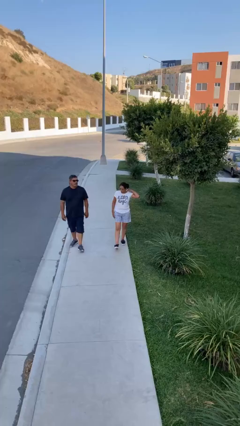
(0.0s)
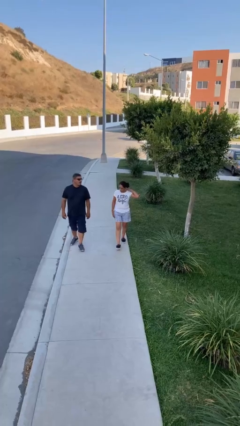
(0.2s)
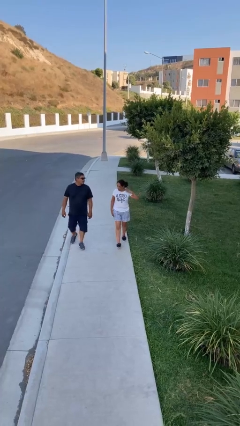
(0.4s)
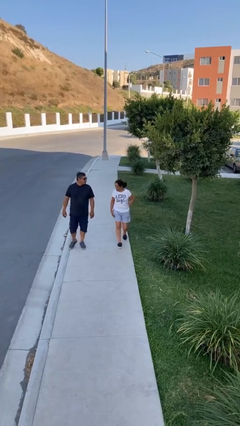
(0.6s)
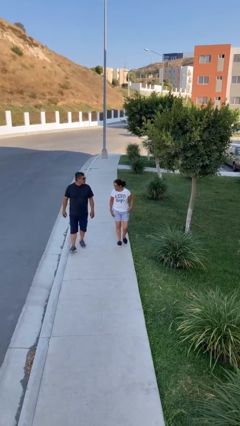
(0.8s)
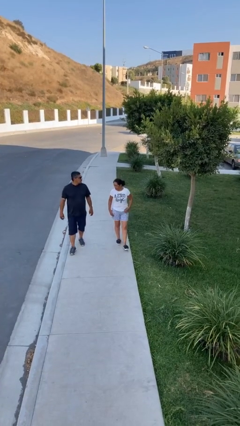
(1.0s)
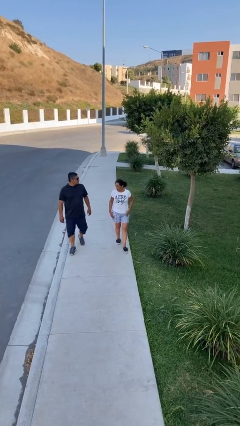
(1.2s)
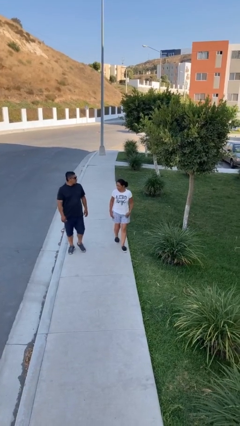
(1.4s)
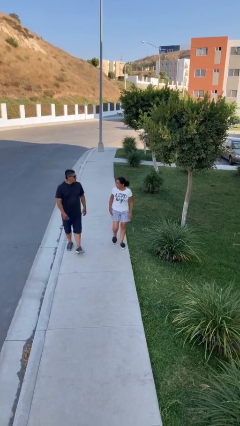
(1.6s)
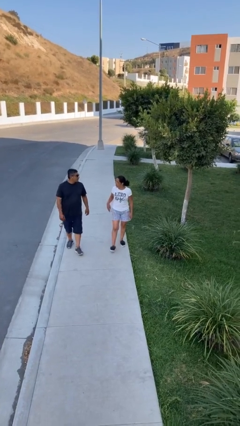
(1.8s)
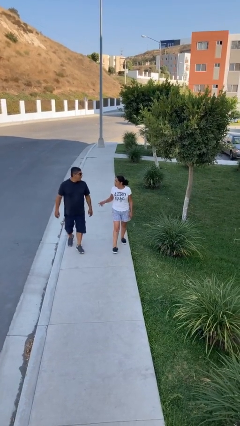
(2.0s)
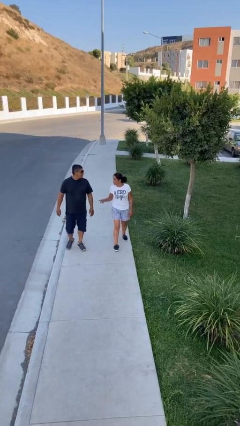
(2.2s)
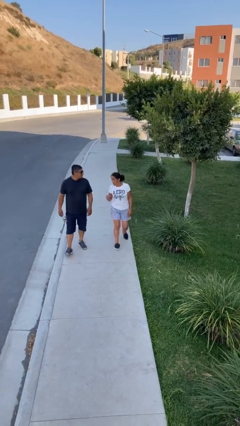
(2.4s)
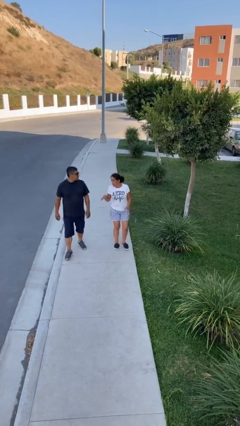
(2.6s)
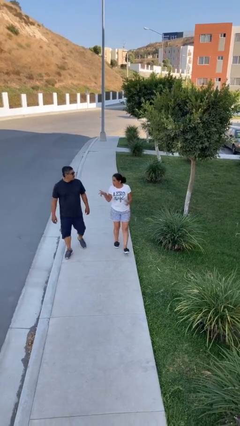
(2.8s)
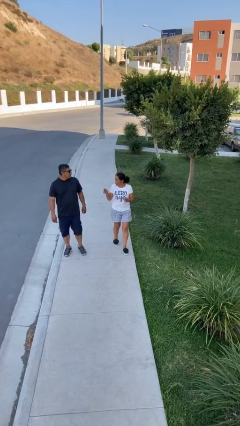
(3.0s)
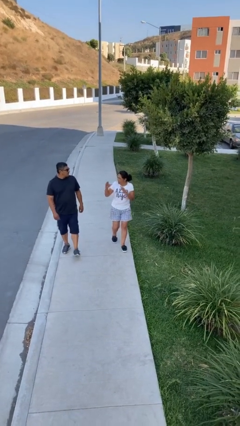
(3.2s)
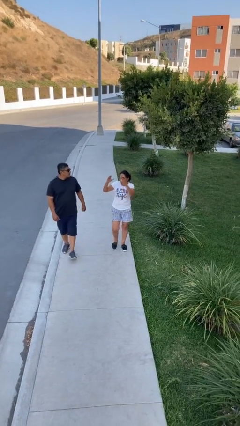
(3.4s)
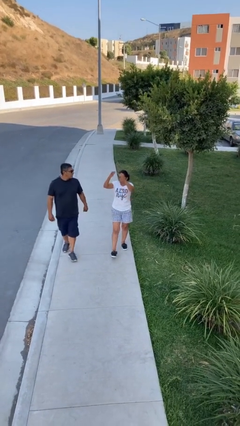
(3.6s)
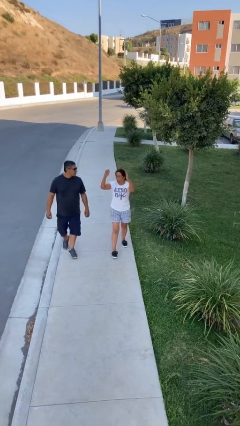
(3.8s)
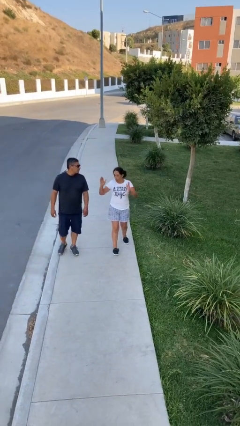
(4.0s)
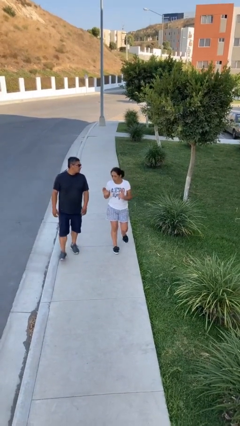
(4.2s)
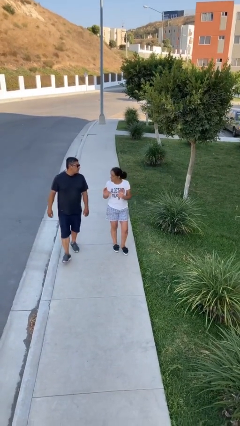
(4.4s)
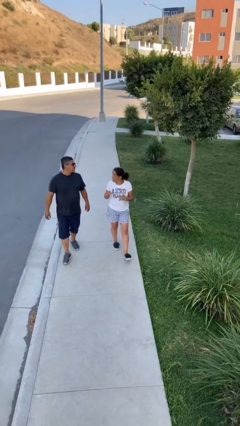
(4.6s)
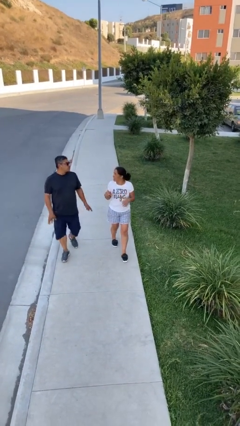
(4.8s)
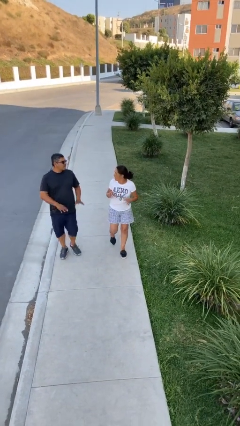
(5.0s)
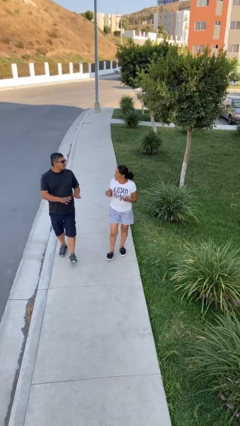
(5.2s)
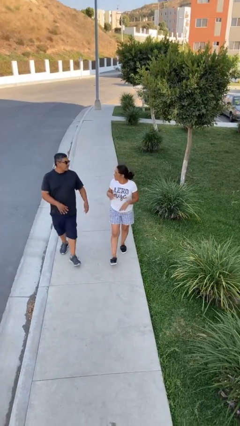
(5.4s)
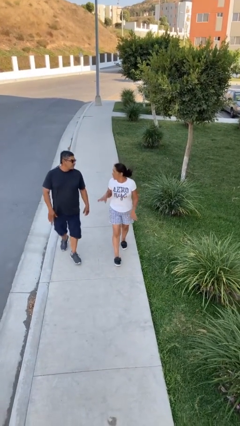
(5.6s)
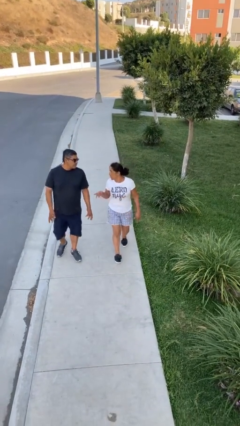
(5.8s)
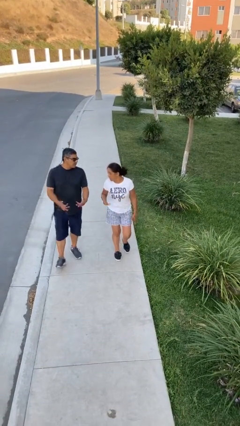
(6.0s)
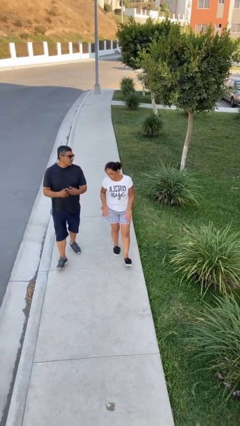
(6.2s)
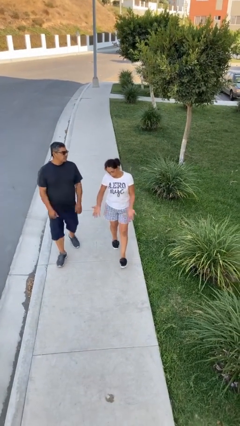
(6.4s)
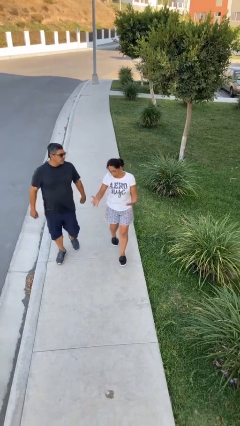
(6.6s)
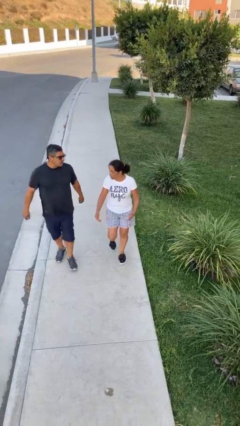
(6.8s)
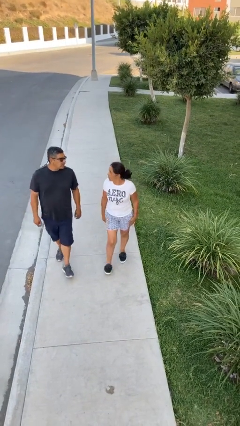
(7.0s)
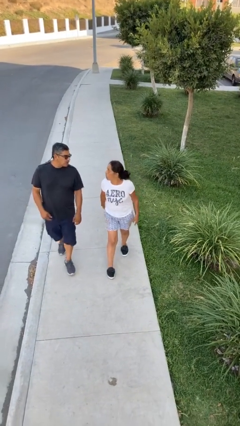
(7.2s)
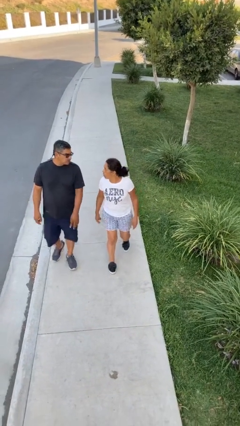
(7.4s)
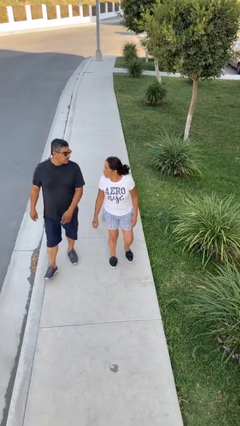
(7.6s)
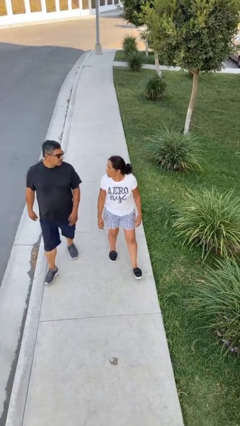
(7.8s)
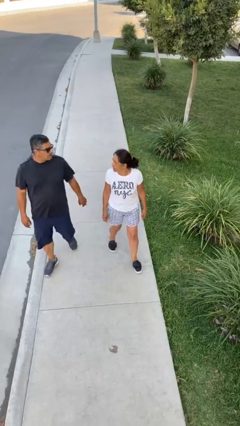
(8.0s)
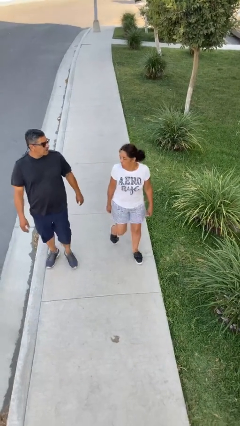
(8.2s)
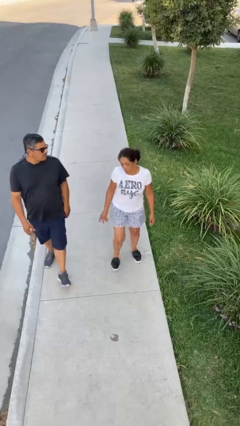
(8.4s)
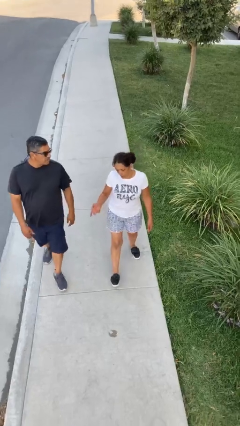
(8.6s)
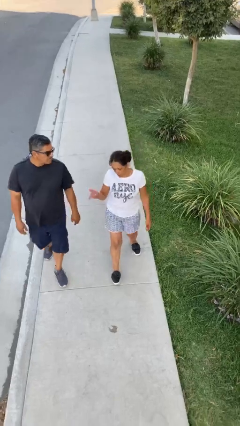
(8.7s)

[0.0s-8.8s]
person talks to person

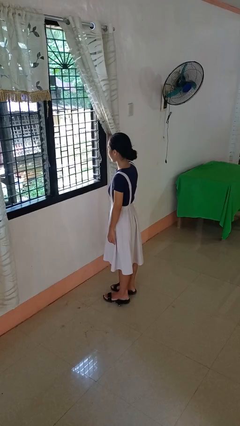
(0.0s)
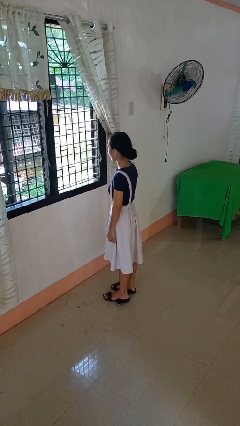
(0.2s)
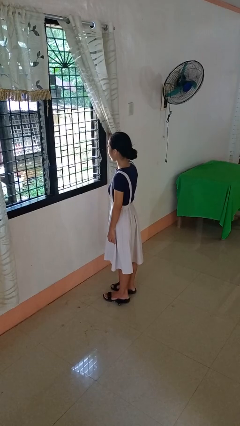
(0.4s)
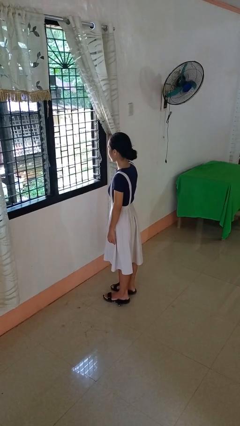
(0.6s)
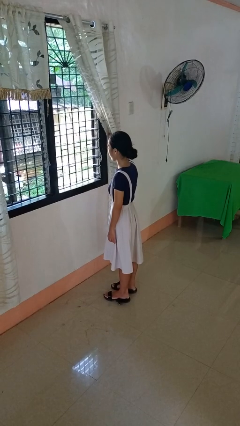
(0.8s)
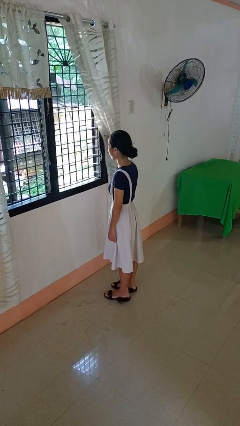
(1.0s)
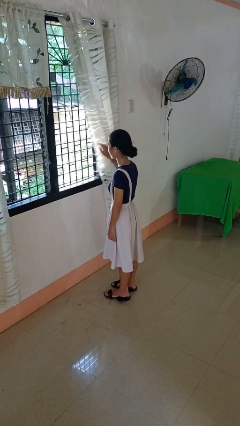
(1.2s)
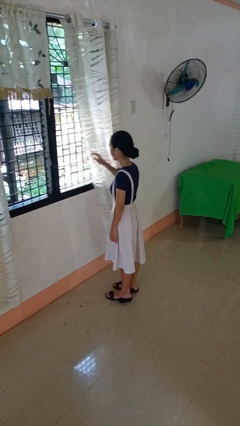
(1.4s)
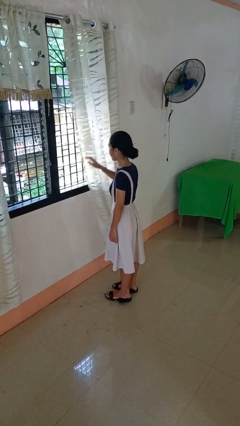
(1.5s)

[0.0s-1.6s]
person opens curtains

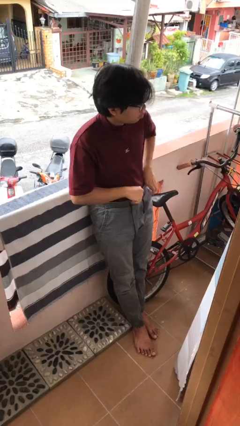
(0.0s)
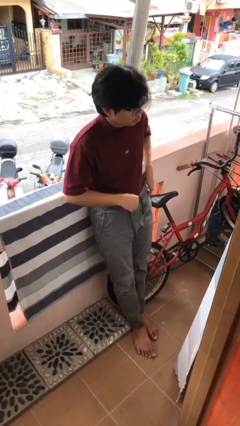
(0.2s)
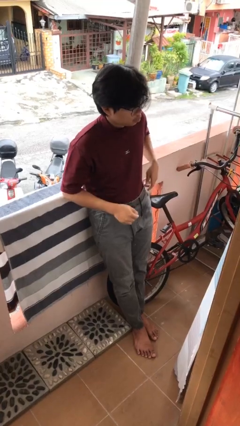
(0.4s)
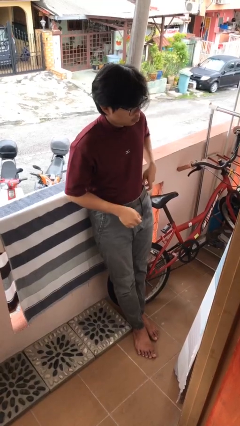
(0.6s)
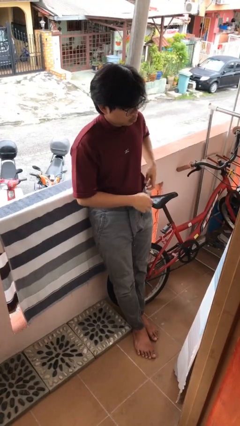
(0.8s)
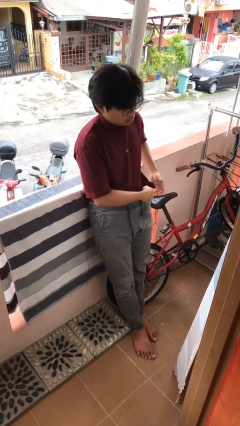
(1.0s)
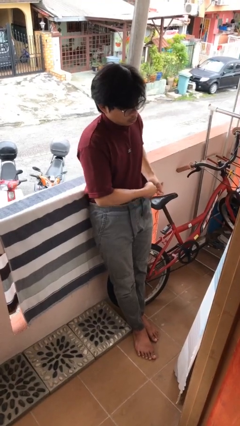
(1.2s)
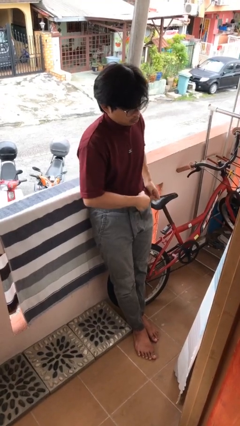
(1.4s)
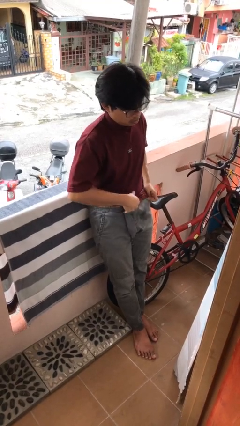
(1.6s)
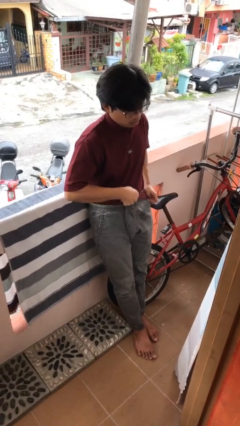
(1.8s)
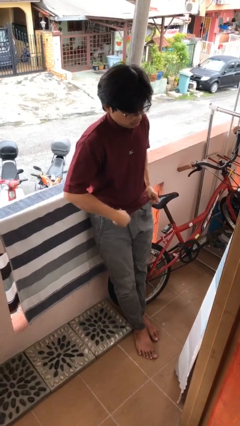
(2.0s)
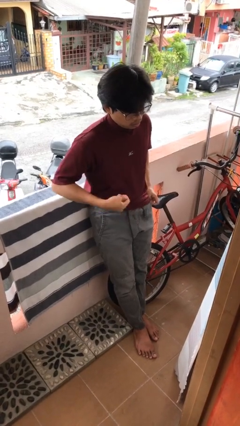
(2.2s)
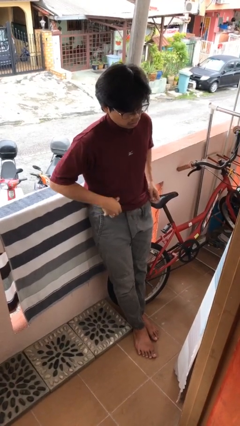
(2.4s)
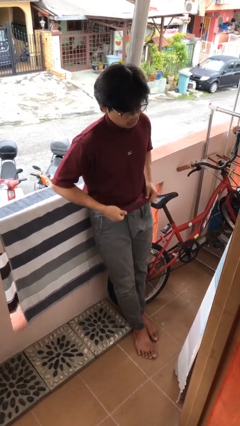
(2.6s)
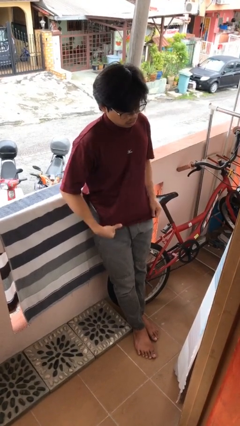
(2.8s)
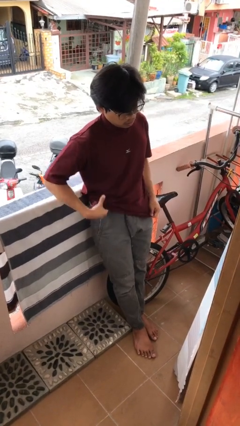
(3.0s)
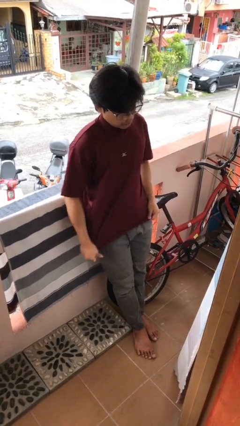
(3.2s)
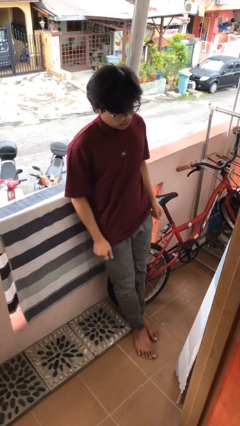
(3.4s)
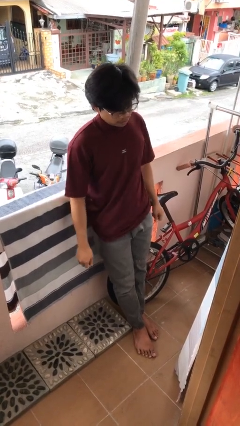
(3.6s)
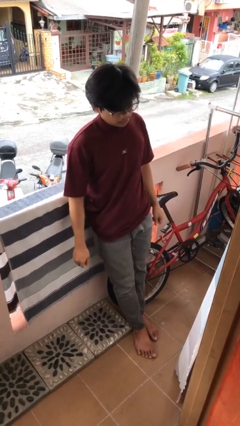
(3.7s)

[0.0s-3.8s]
person untucks shirt

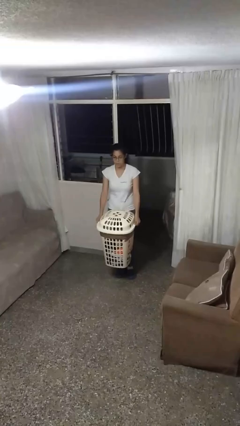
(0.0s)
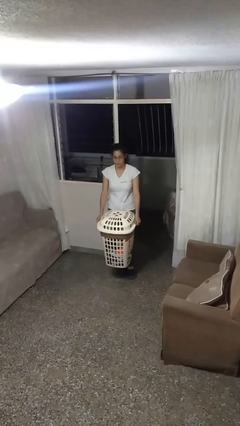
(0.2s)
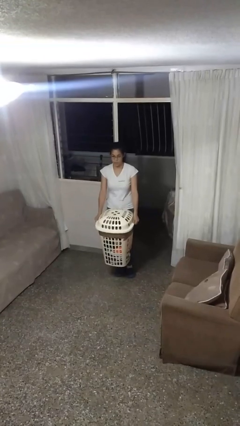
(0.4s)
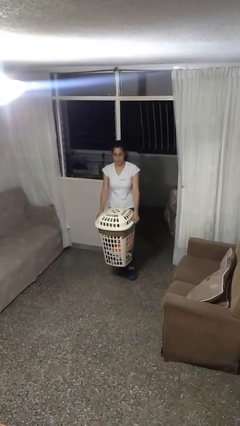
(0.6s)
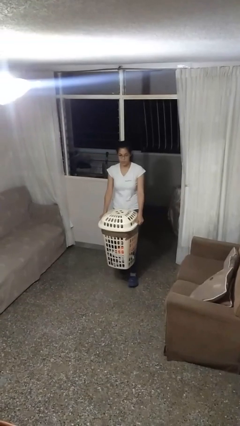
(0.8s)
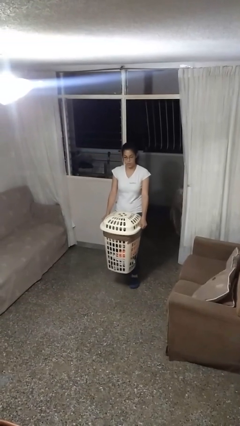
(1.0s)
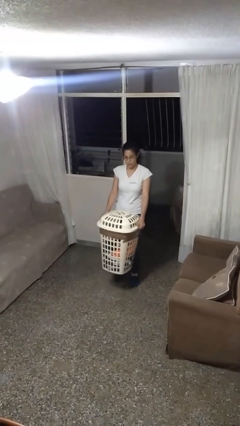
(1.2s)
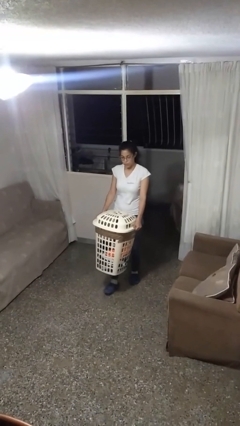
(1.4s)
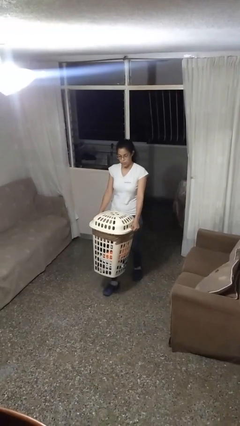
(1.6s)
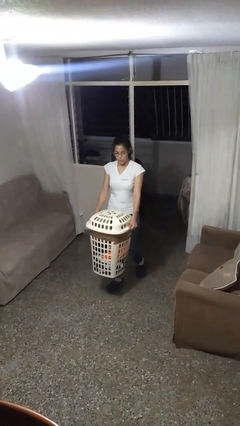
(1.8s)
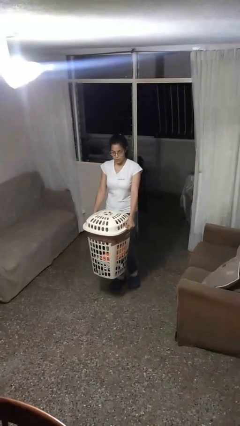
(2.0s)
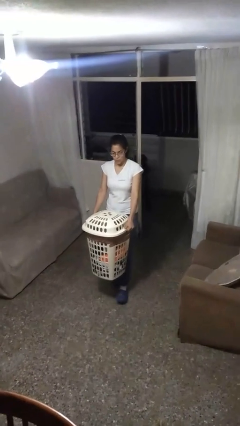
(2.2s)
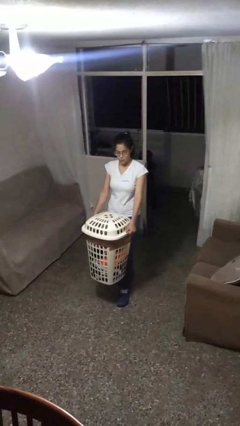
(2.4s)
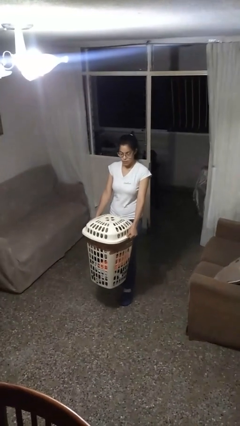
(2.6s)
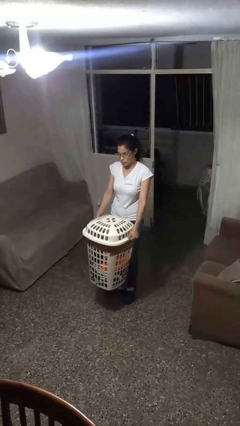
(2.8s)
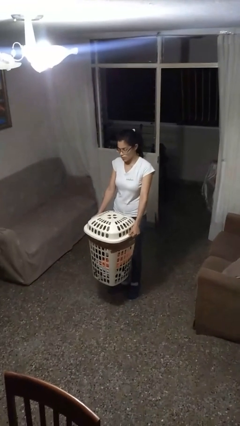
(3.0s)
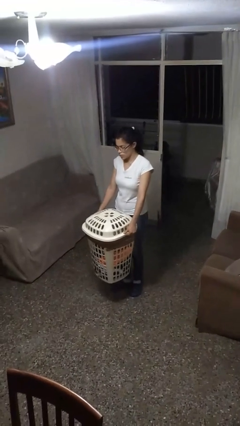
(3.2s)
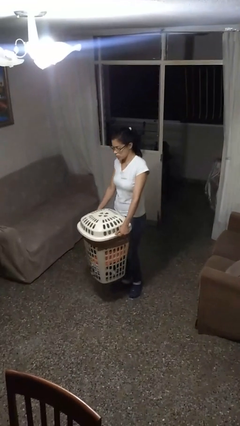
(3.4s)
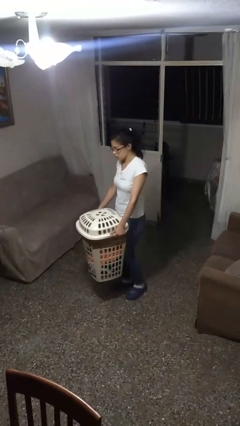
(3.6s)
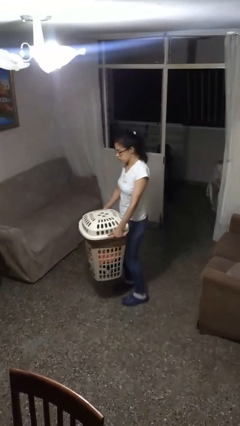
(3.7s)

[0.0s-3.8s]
person carries laundry basket
